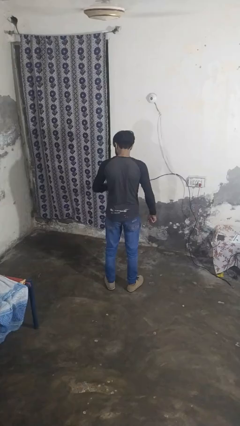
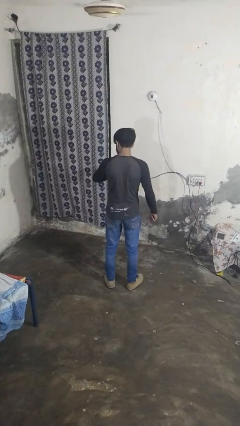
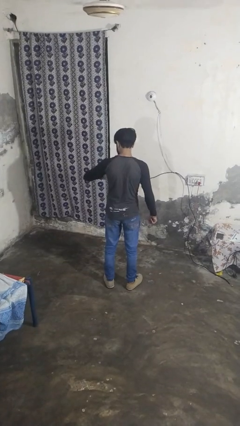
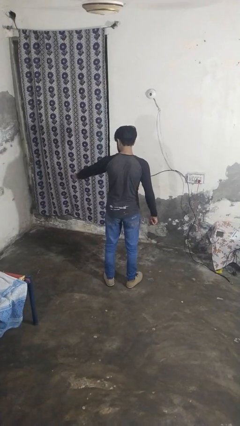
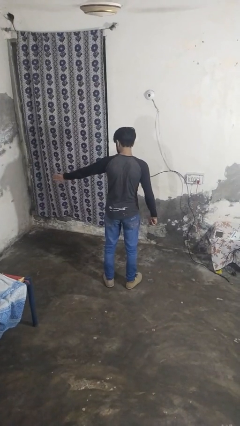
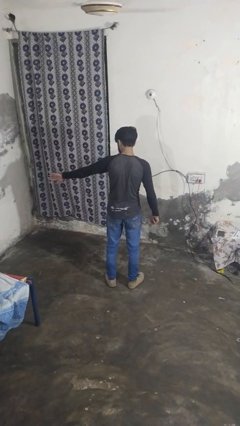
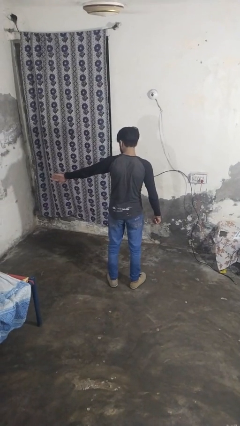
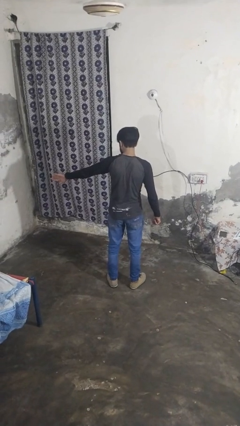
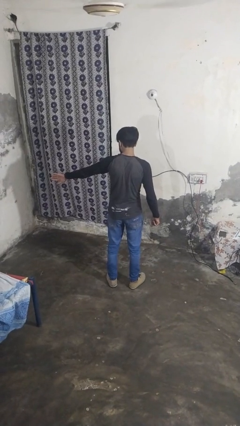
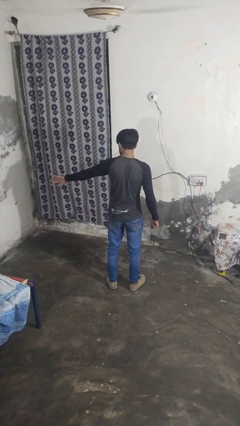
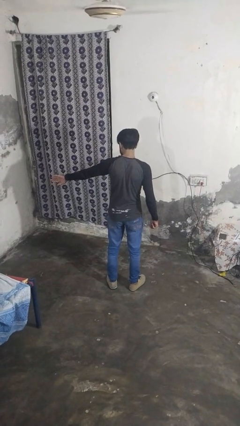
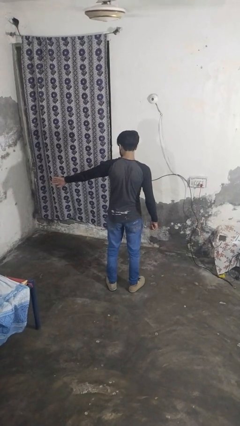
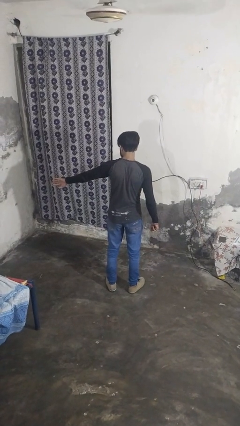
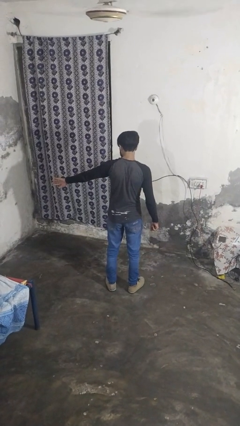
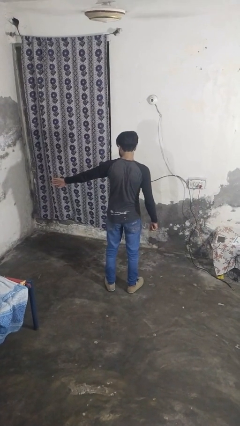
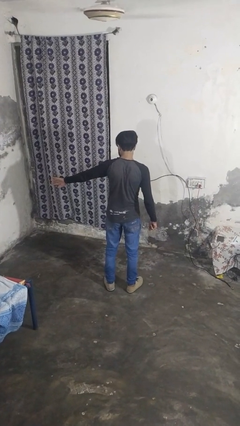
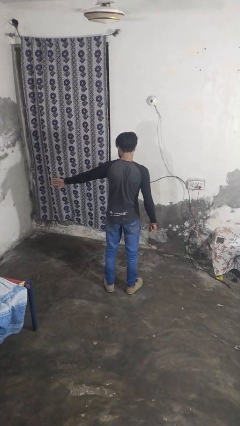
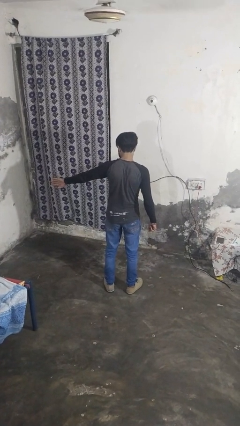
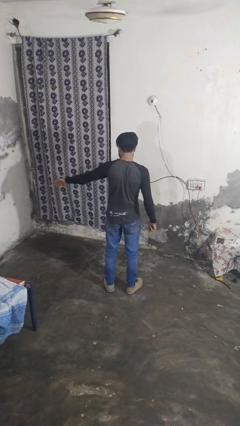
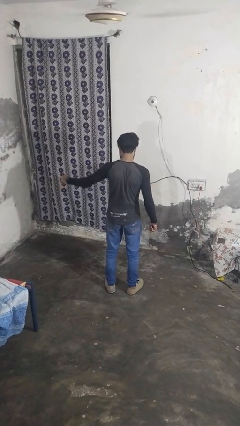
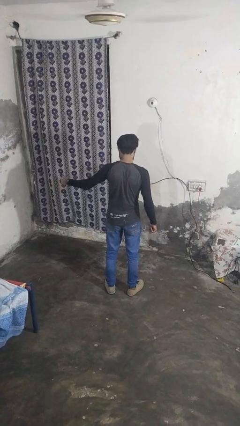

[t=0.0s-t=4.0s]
person gestures swipe left

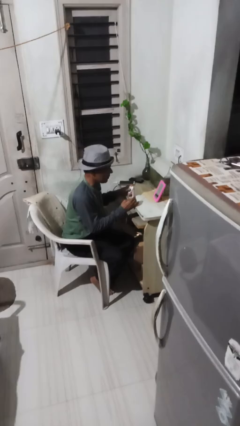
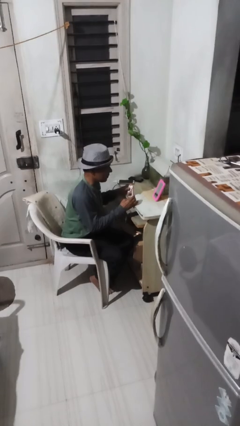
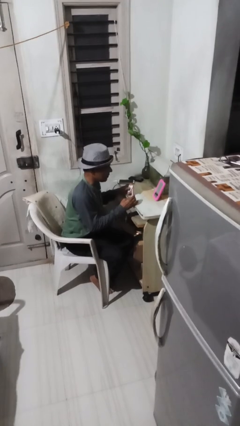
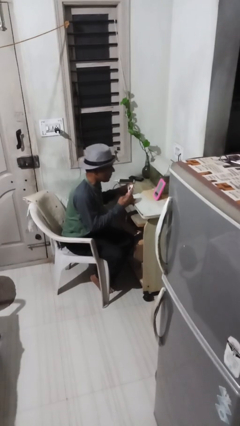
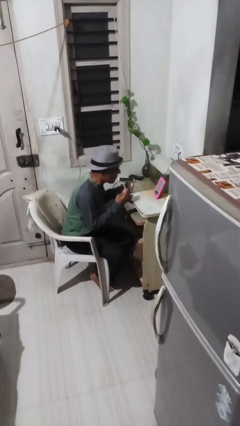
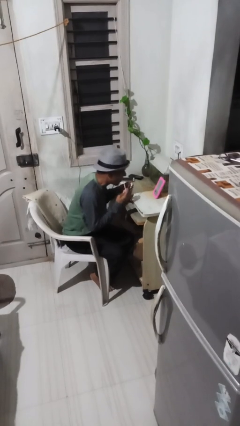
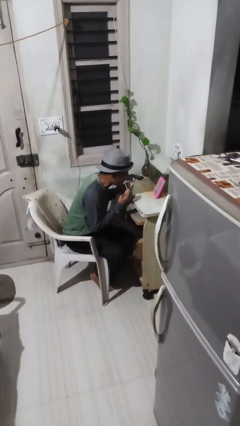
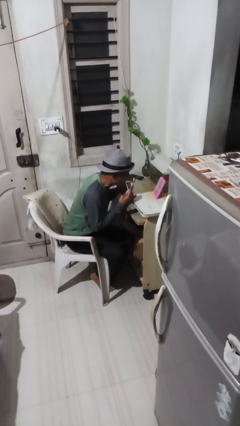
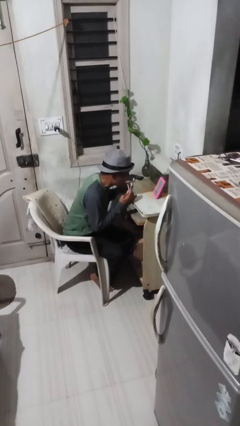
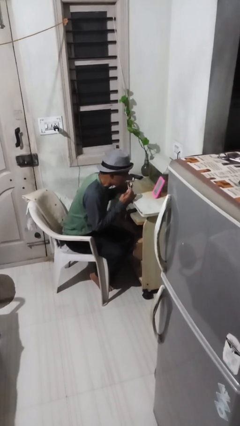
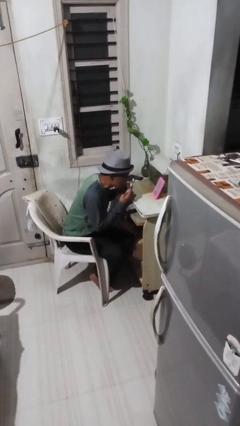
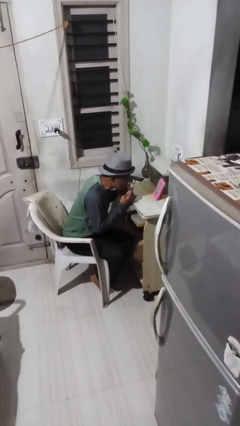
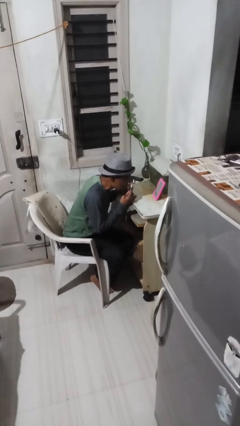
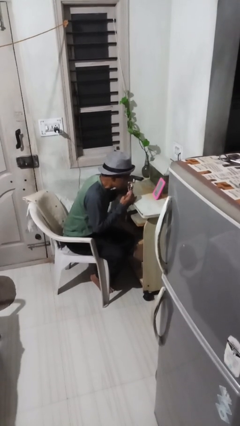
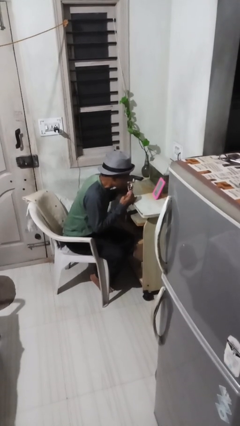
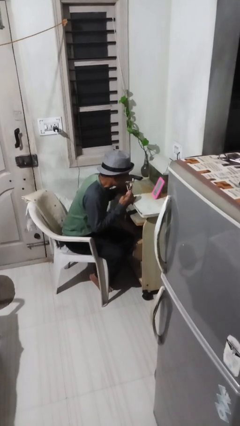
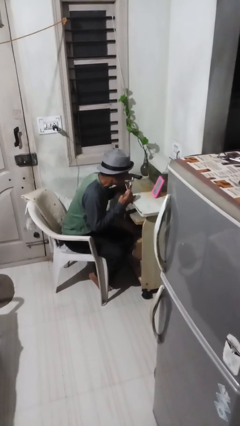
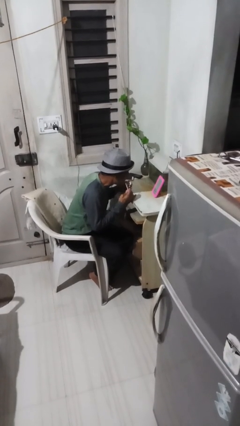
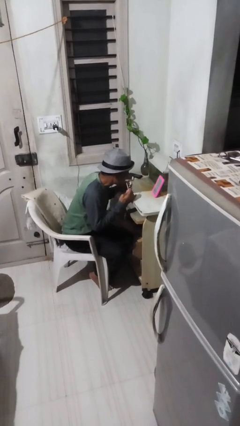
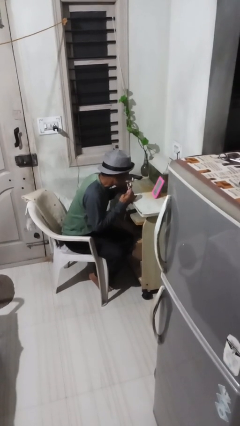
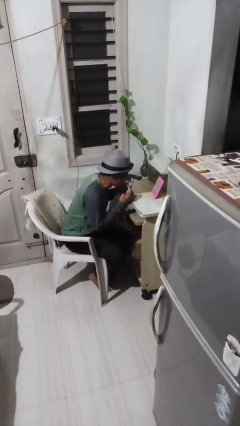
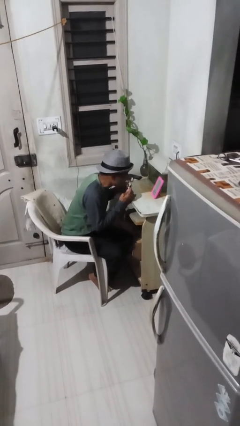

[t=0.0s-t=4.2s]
person applies lip makeup

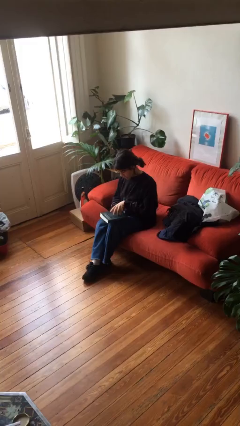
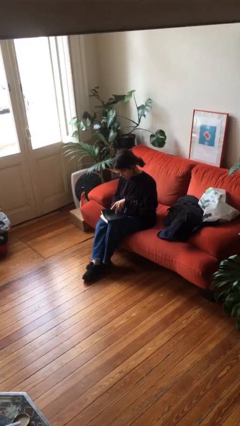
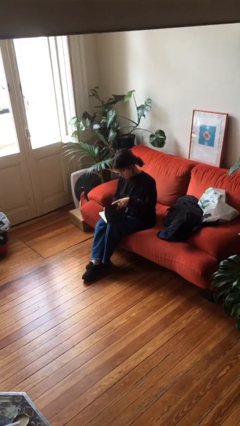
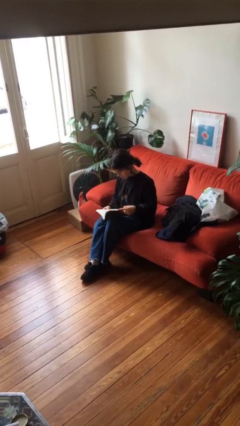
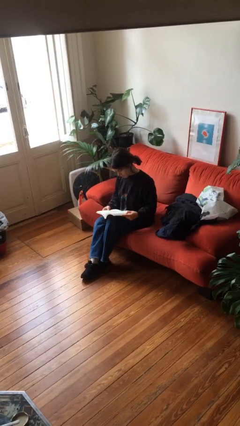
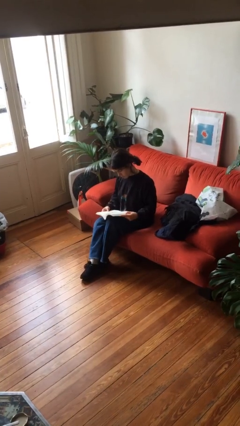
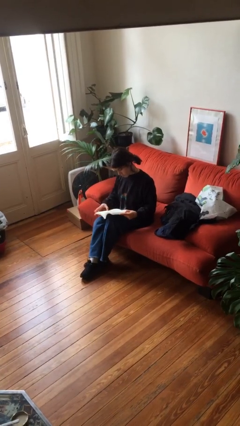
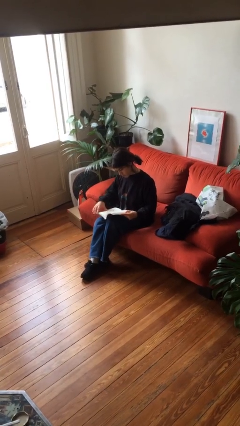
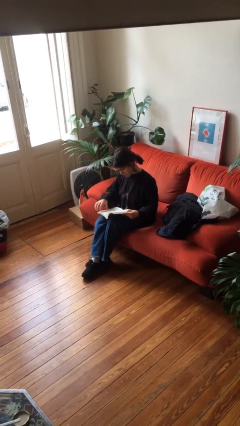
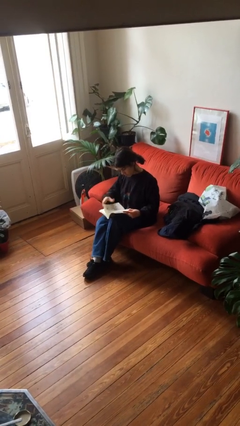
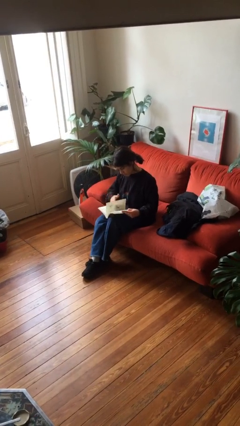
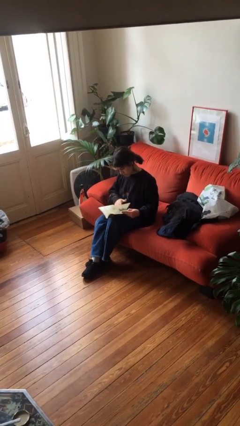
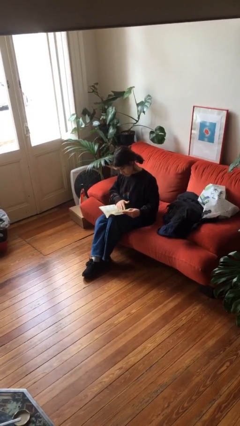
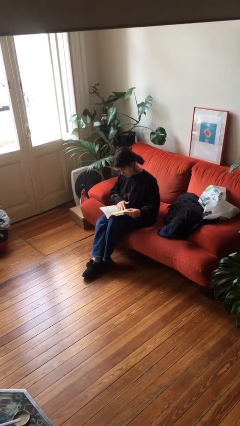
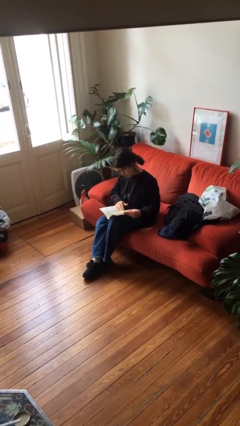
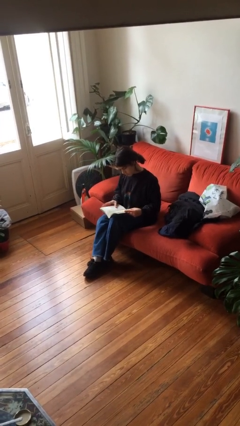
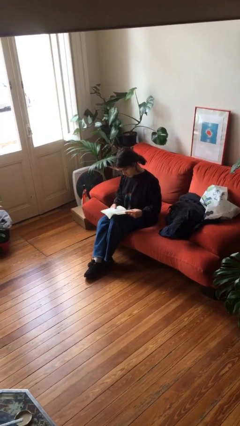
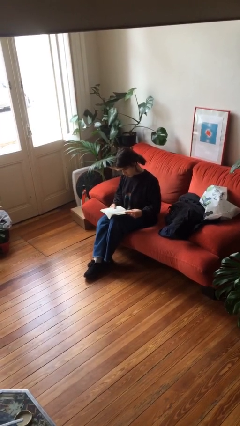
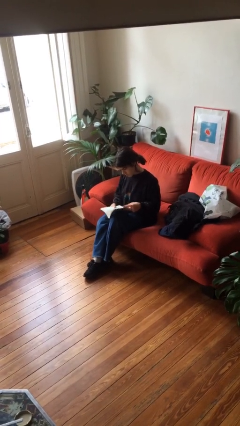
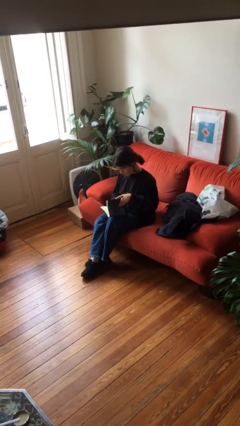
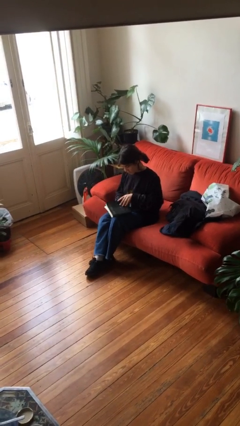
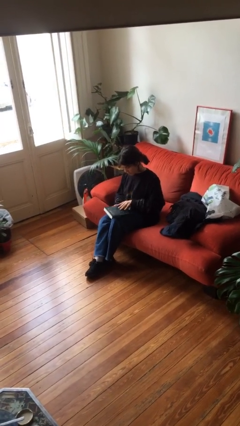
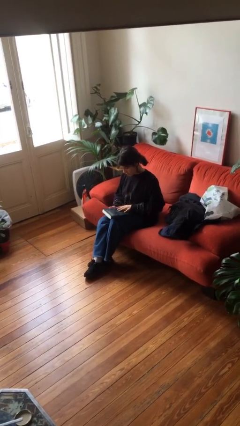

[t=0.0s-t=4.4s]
person reads book

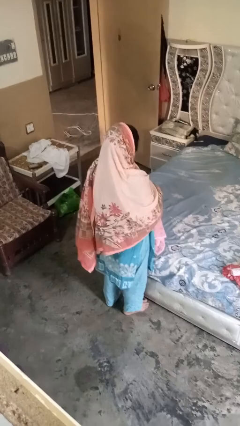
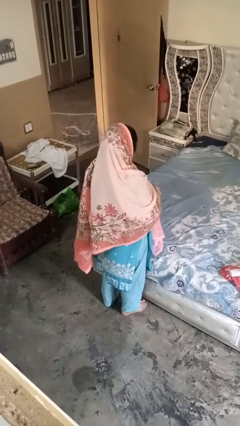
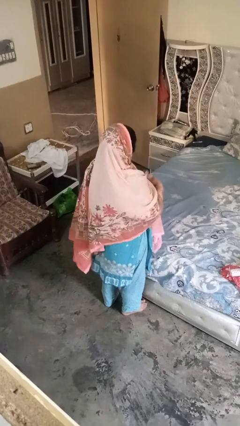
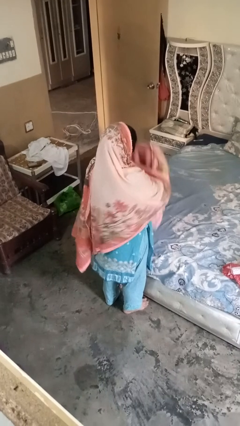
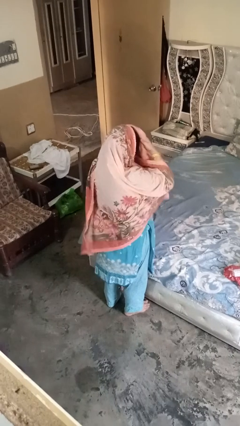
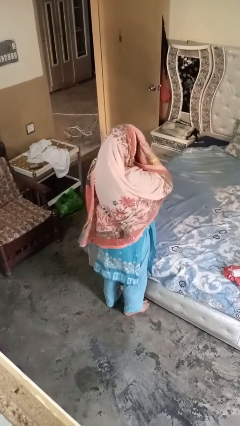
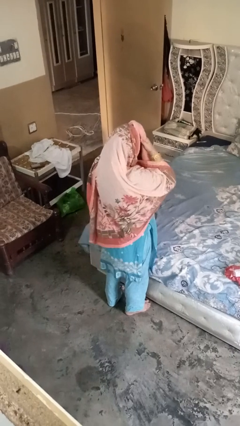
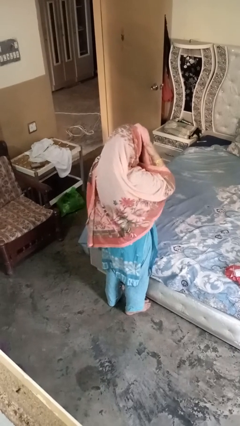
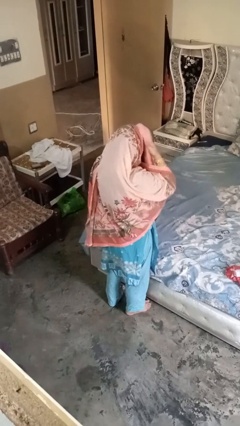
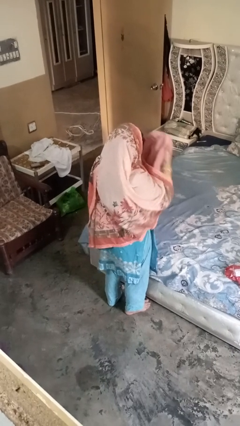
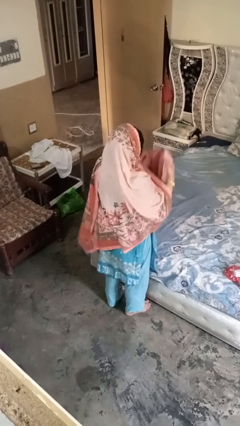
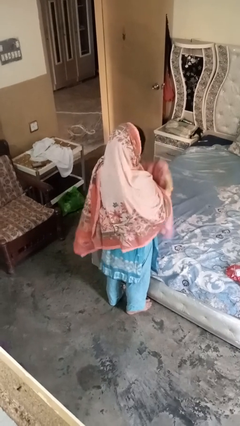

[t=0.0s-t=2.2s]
person dries hair with towel

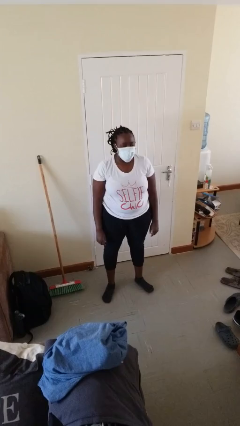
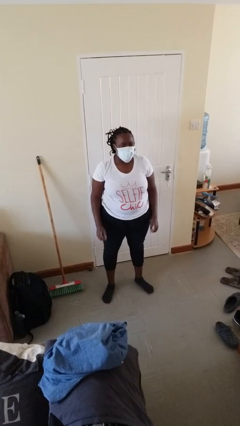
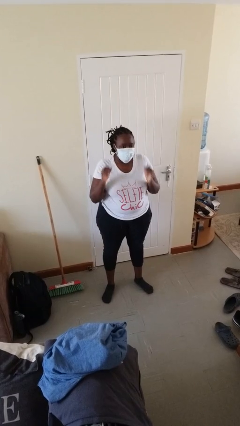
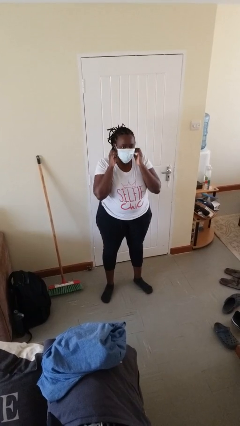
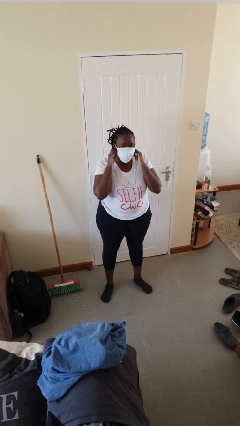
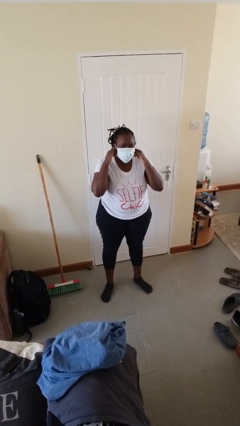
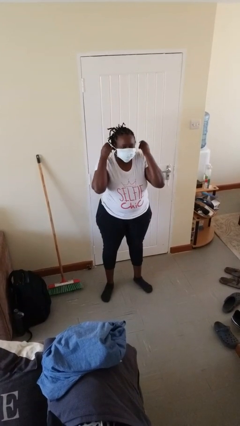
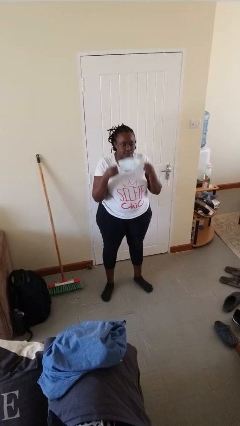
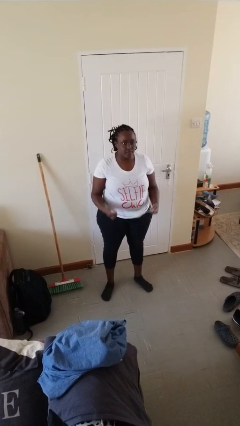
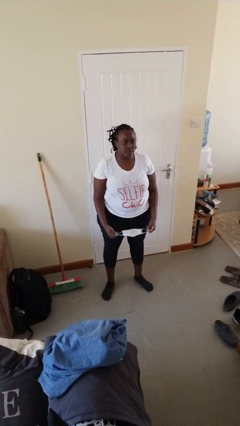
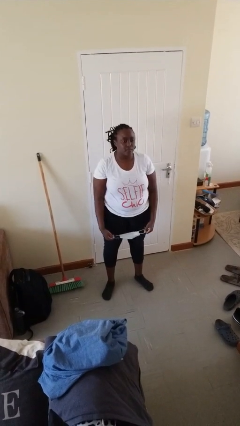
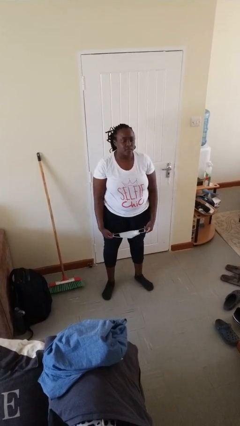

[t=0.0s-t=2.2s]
person takes off facemask

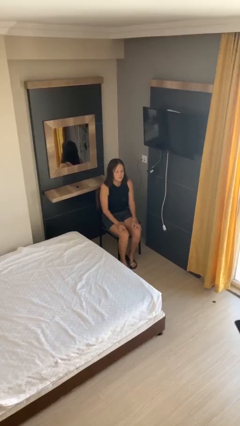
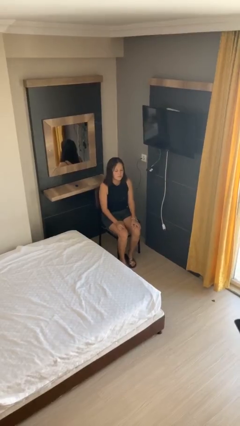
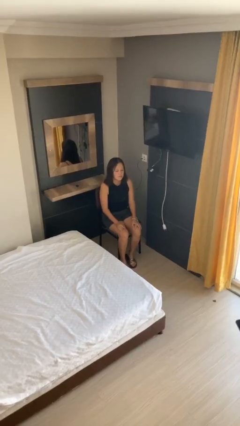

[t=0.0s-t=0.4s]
person stands up from floor
